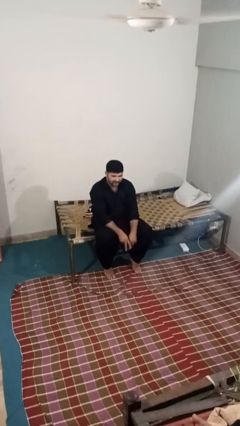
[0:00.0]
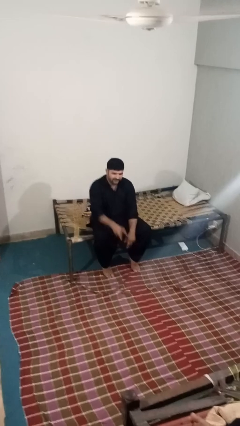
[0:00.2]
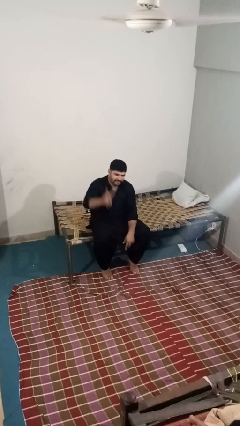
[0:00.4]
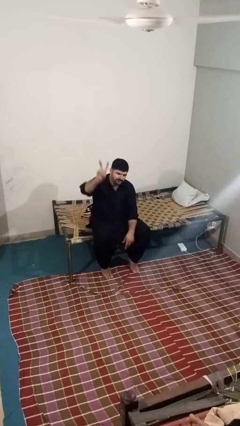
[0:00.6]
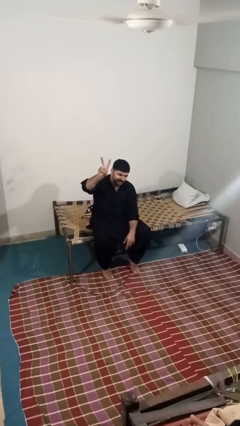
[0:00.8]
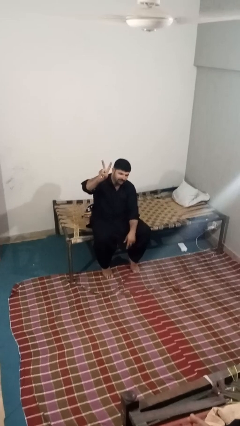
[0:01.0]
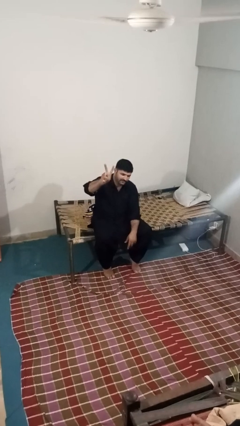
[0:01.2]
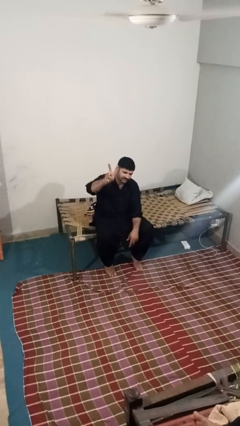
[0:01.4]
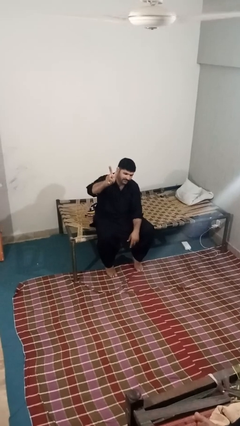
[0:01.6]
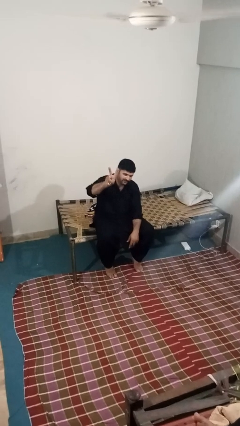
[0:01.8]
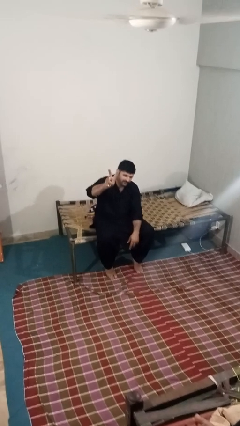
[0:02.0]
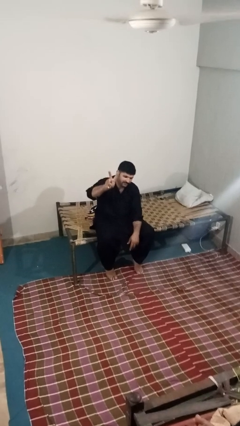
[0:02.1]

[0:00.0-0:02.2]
person gestures peace

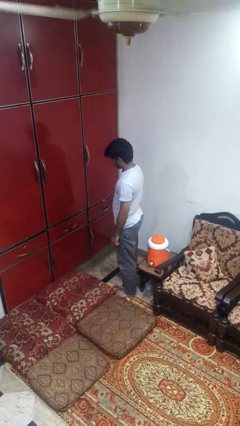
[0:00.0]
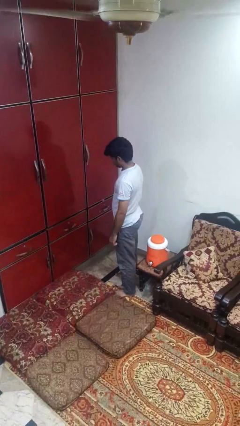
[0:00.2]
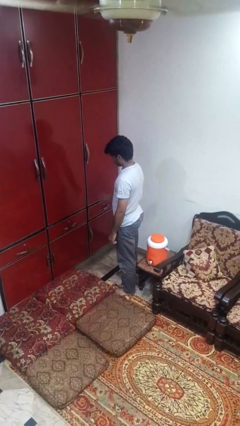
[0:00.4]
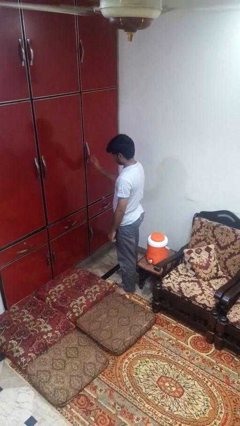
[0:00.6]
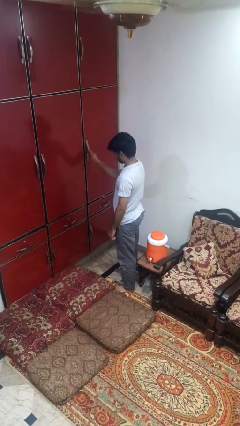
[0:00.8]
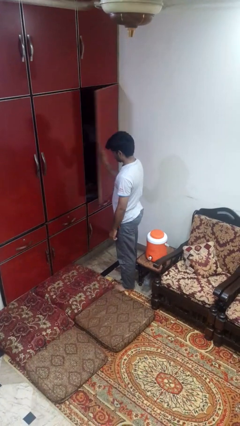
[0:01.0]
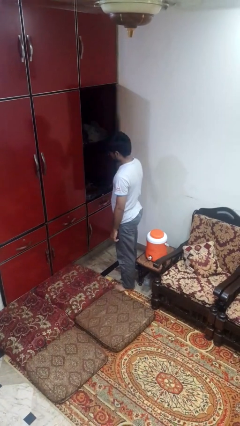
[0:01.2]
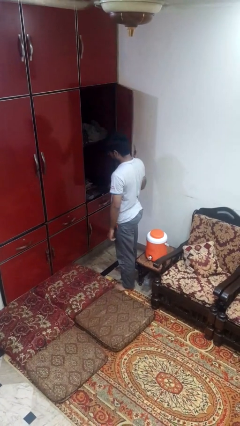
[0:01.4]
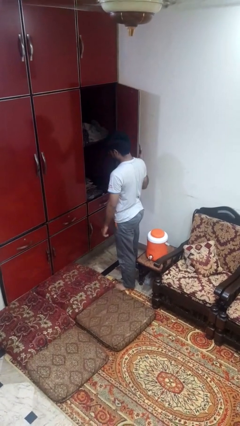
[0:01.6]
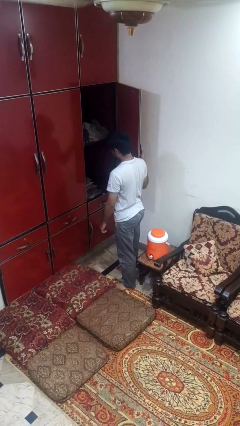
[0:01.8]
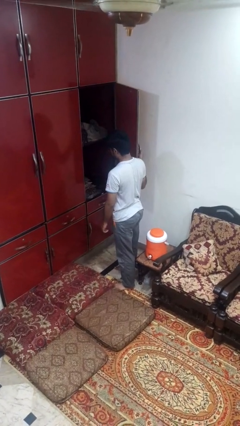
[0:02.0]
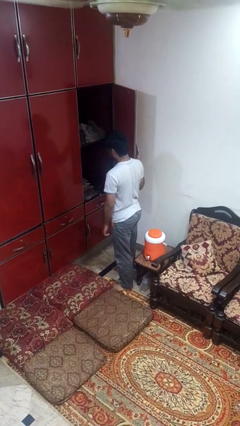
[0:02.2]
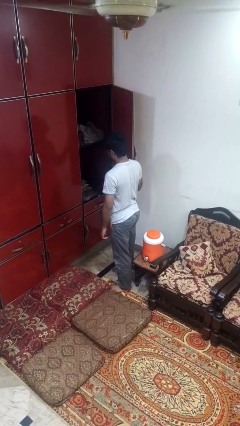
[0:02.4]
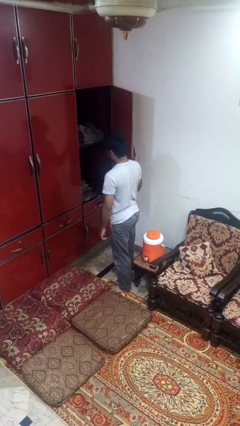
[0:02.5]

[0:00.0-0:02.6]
person closes cabinet

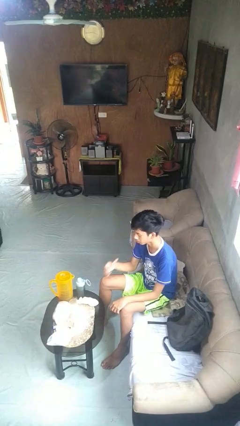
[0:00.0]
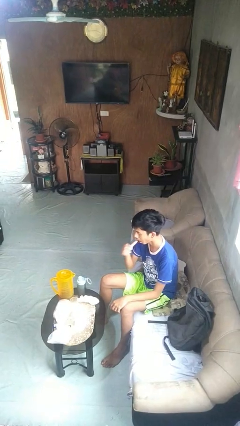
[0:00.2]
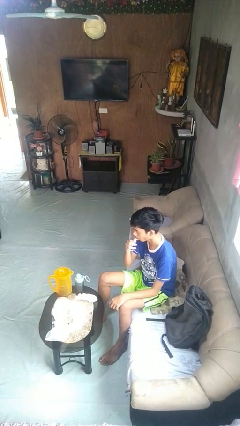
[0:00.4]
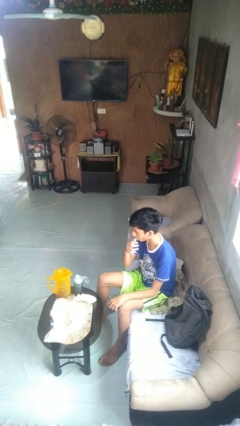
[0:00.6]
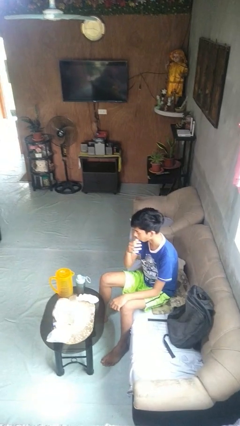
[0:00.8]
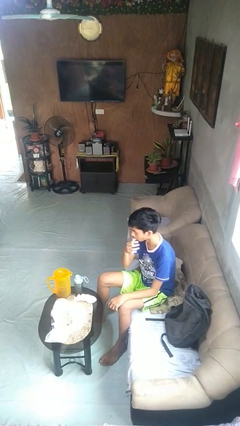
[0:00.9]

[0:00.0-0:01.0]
person licks fingers

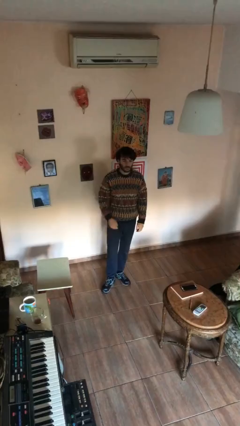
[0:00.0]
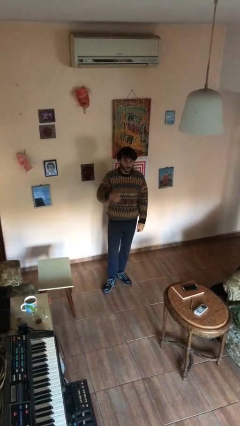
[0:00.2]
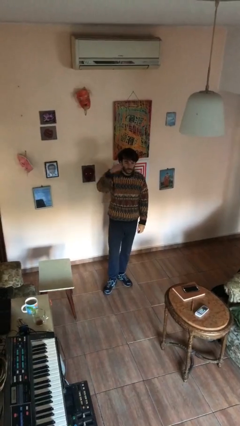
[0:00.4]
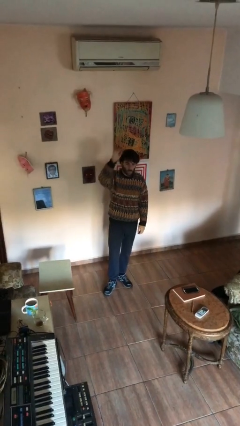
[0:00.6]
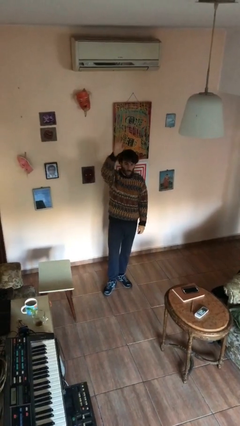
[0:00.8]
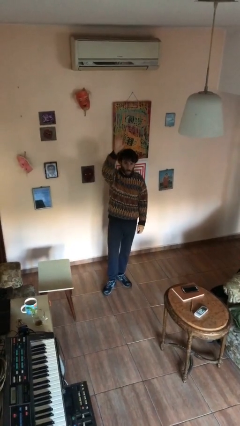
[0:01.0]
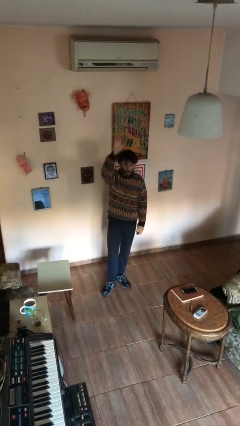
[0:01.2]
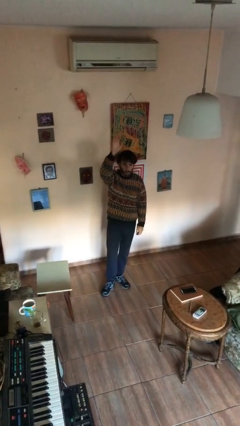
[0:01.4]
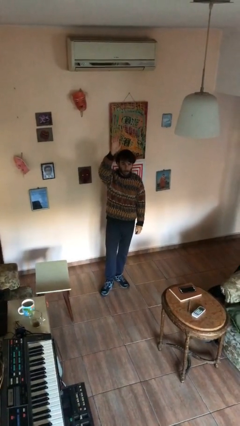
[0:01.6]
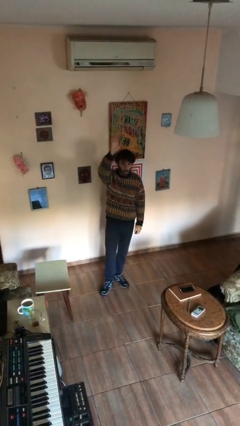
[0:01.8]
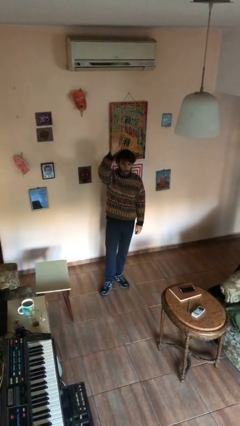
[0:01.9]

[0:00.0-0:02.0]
person gestures raise hand

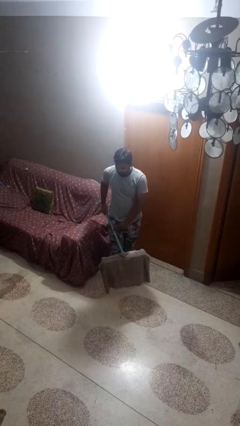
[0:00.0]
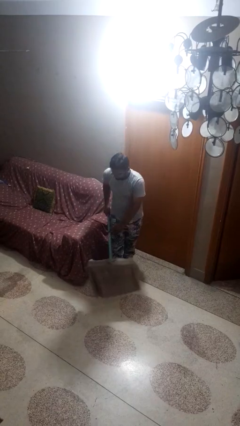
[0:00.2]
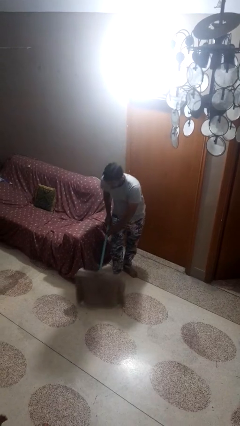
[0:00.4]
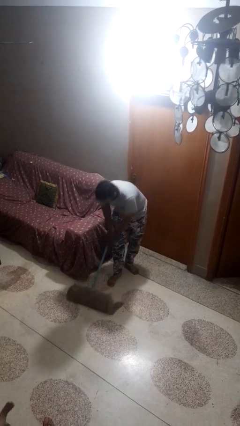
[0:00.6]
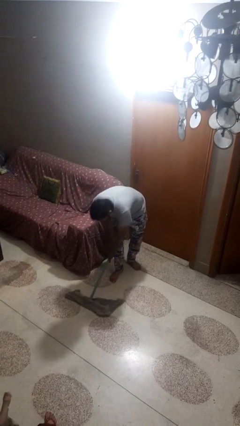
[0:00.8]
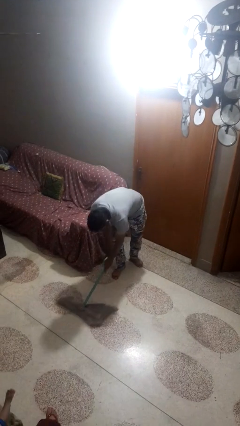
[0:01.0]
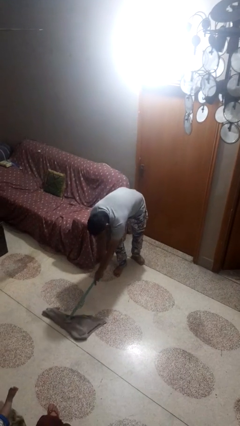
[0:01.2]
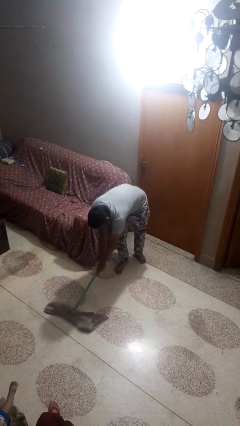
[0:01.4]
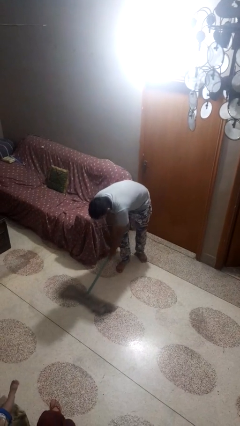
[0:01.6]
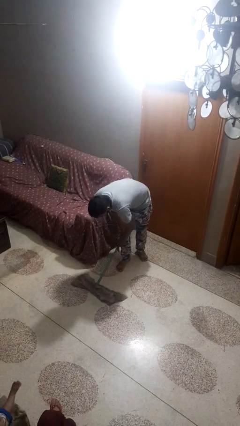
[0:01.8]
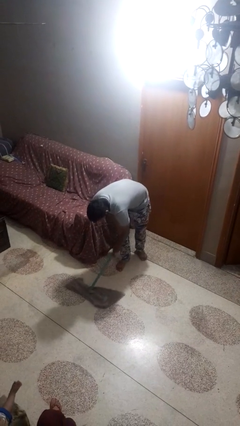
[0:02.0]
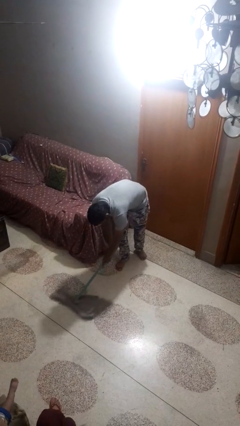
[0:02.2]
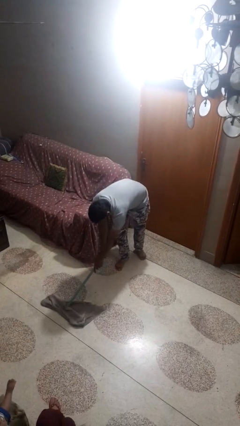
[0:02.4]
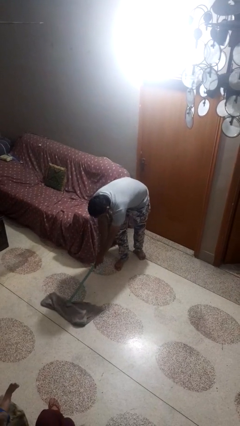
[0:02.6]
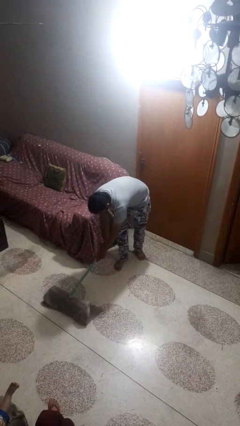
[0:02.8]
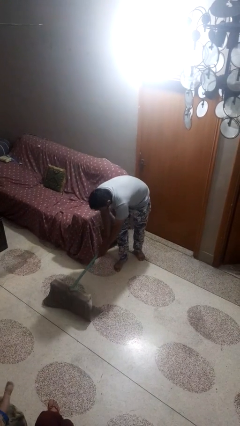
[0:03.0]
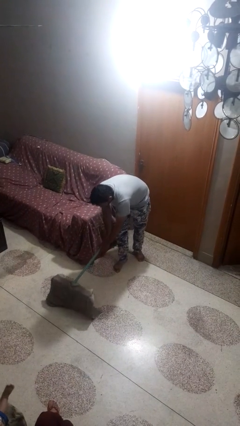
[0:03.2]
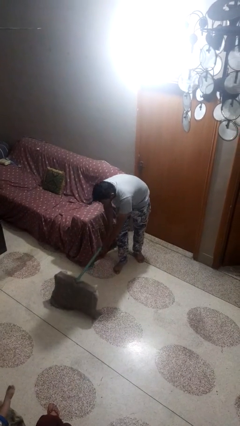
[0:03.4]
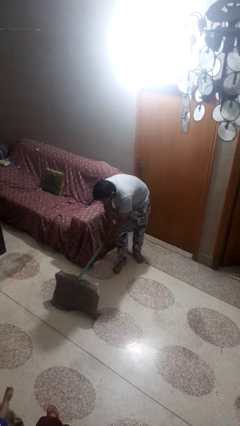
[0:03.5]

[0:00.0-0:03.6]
person mops

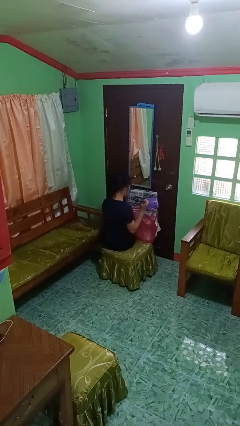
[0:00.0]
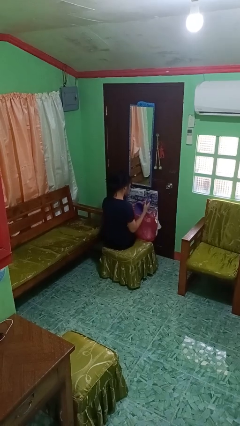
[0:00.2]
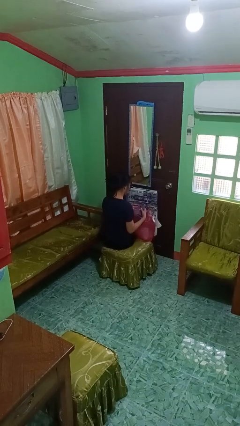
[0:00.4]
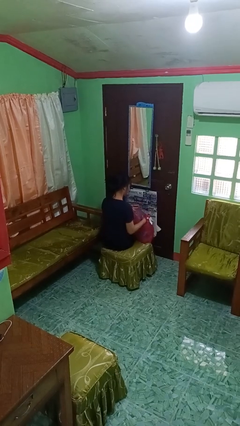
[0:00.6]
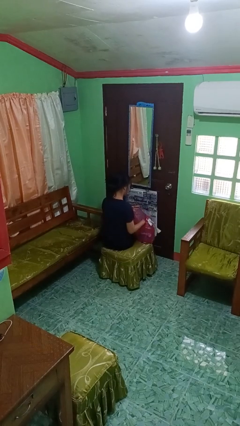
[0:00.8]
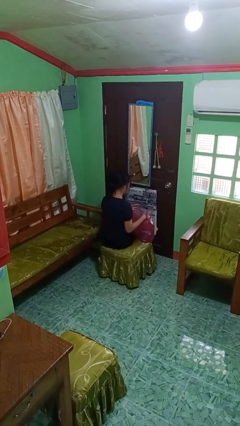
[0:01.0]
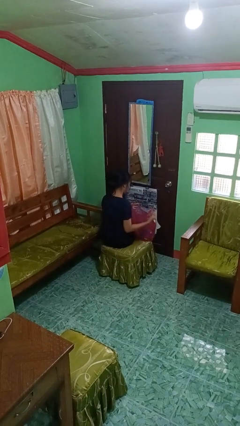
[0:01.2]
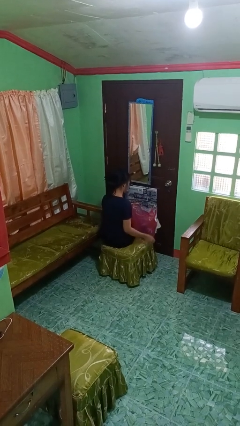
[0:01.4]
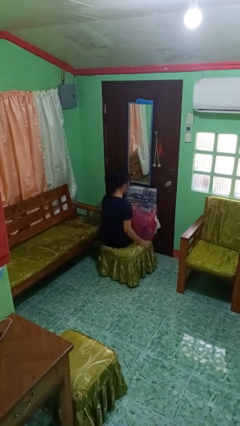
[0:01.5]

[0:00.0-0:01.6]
person puts object into bag

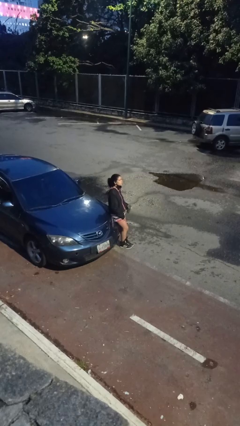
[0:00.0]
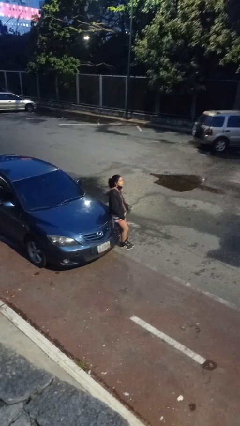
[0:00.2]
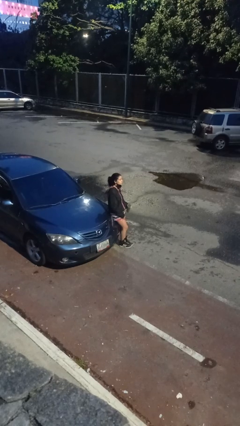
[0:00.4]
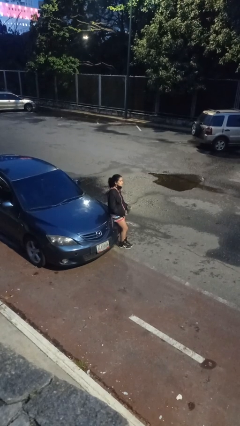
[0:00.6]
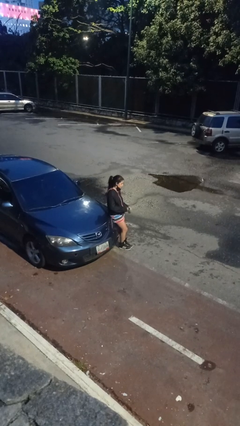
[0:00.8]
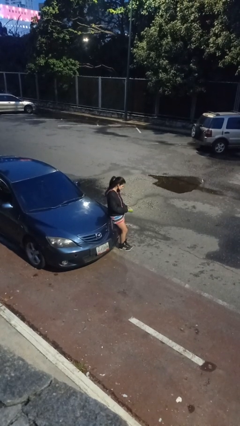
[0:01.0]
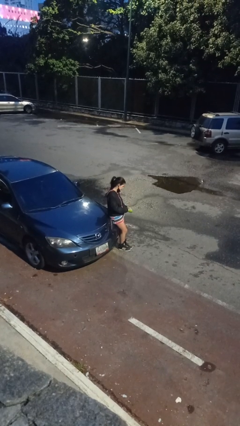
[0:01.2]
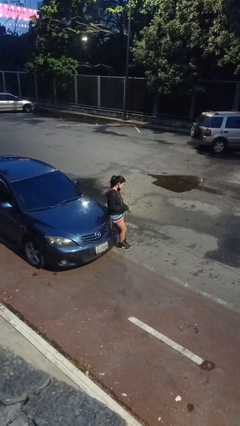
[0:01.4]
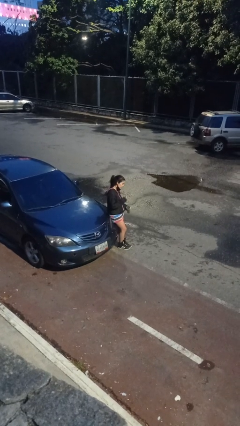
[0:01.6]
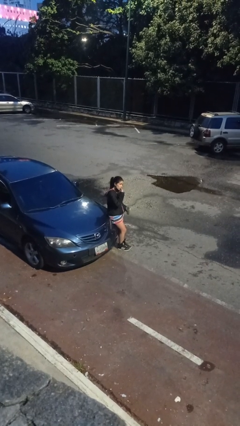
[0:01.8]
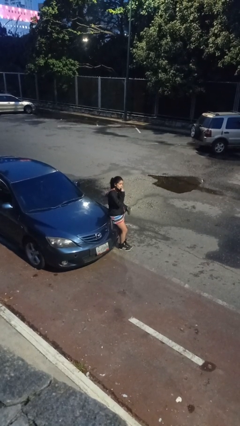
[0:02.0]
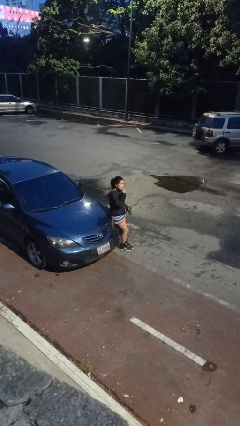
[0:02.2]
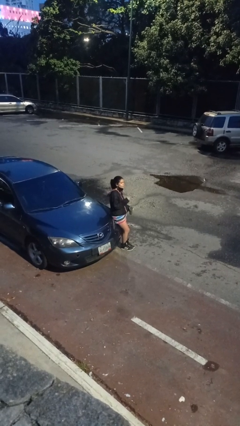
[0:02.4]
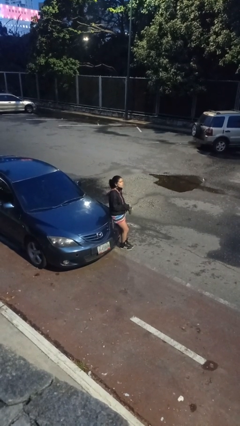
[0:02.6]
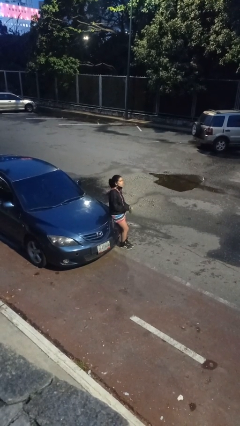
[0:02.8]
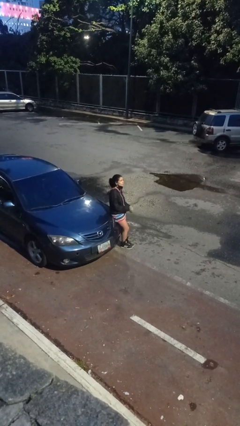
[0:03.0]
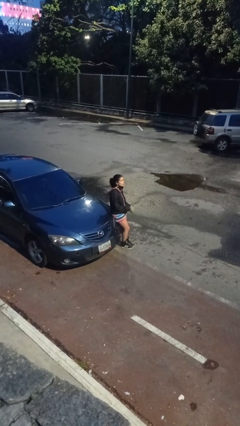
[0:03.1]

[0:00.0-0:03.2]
person eats snack from bag

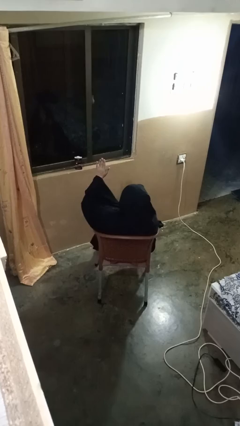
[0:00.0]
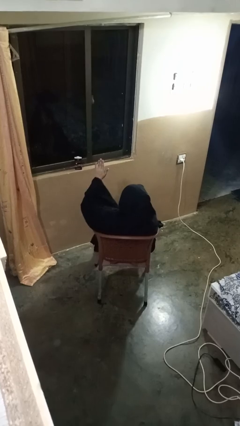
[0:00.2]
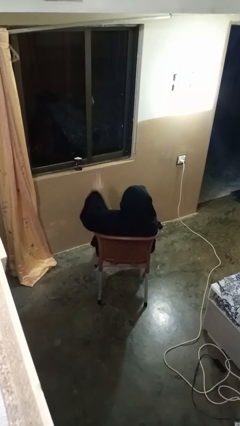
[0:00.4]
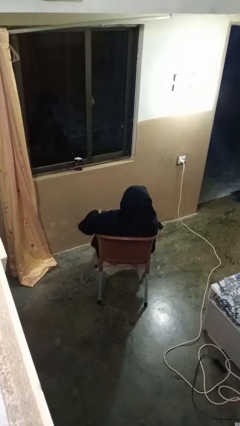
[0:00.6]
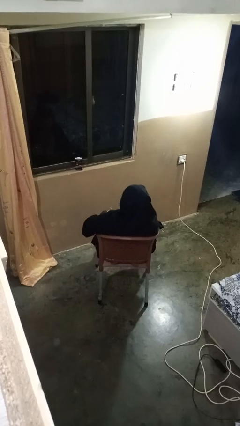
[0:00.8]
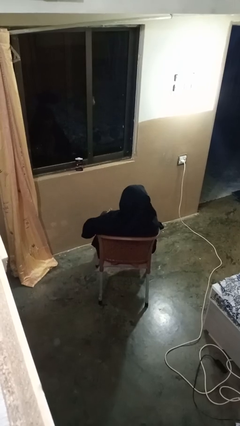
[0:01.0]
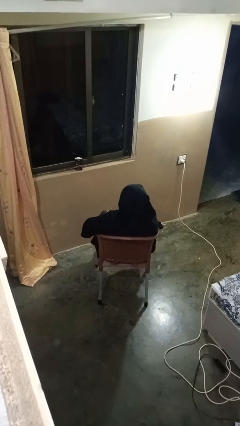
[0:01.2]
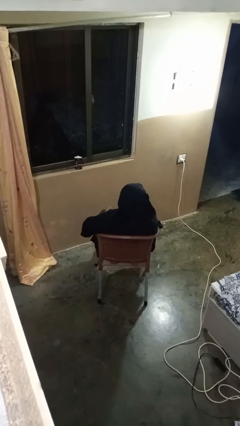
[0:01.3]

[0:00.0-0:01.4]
person gestures lower hand
